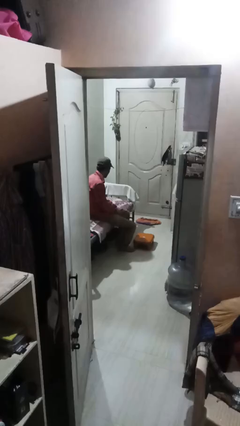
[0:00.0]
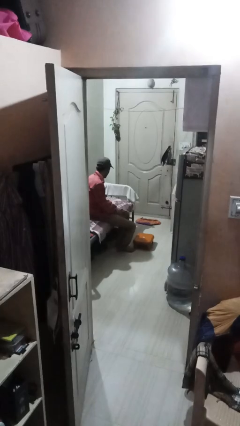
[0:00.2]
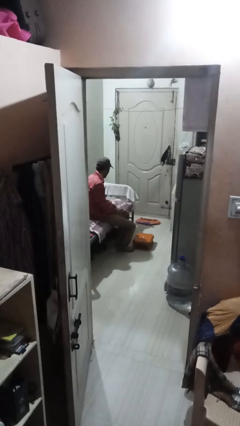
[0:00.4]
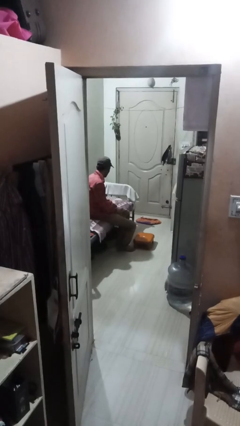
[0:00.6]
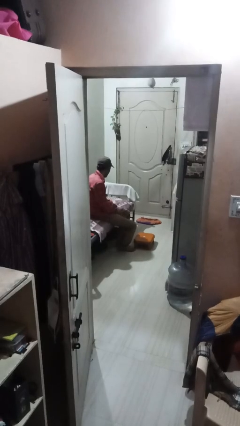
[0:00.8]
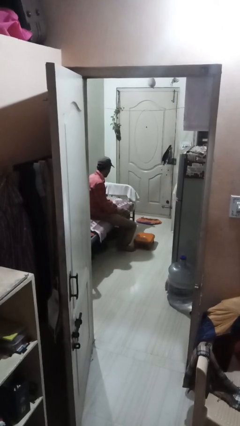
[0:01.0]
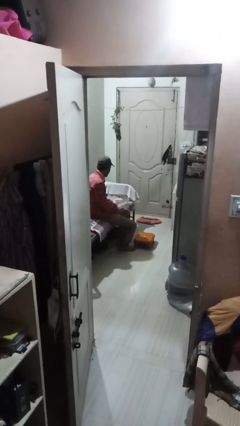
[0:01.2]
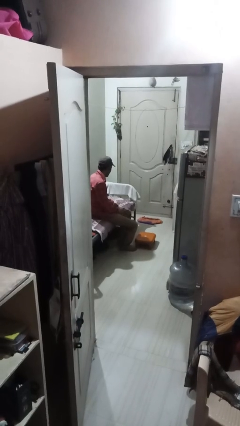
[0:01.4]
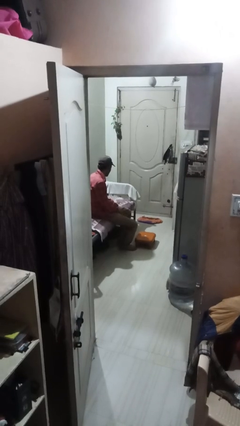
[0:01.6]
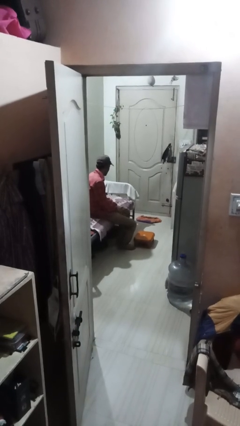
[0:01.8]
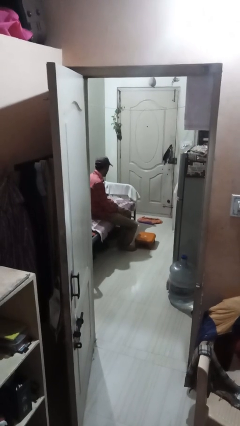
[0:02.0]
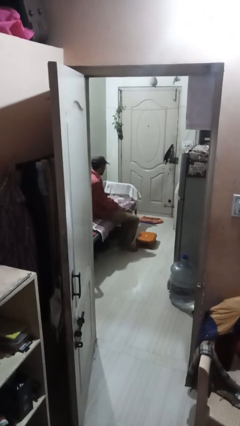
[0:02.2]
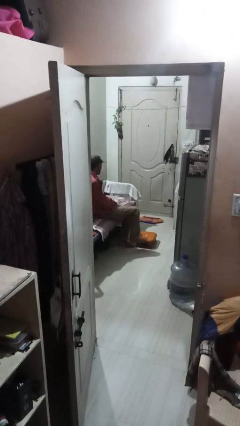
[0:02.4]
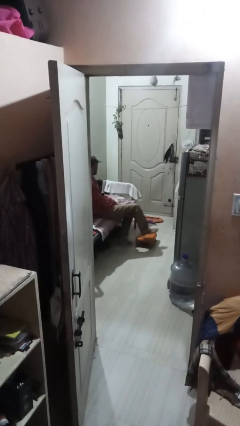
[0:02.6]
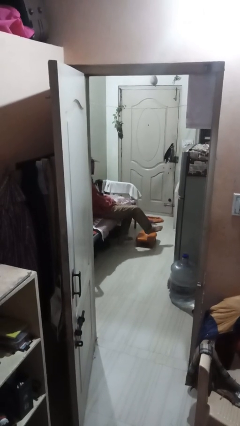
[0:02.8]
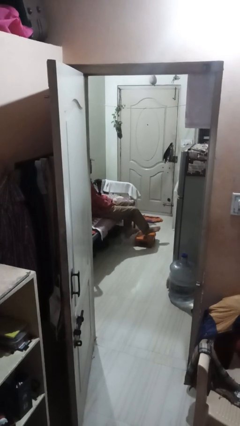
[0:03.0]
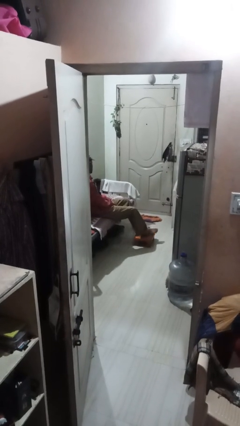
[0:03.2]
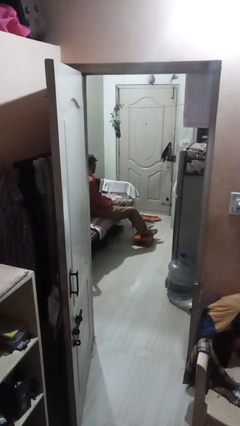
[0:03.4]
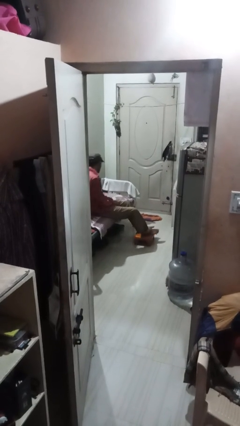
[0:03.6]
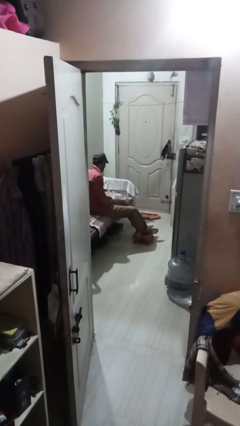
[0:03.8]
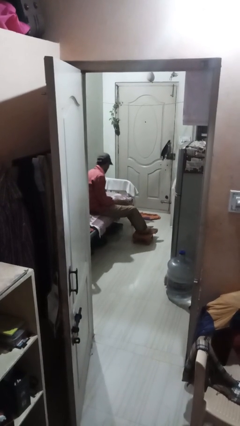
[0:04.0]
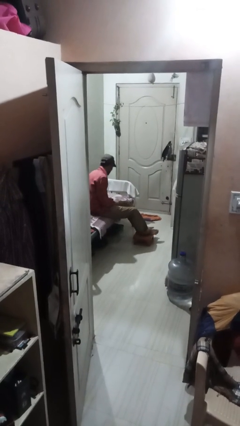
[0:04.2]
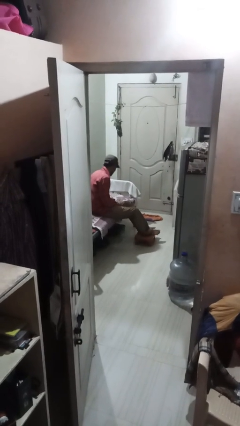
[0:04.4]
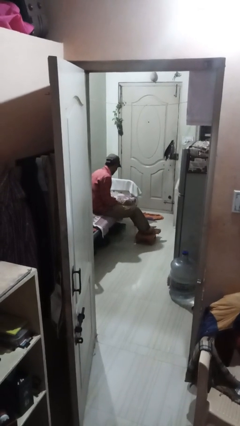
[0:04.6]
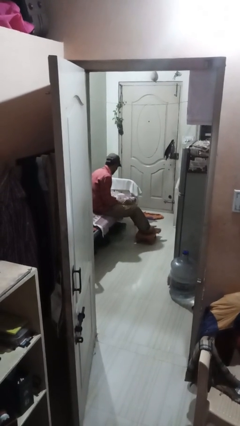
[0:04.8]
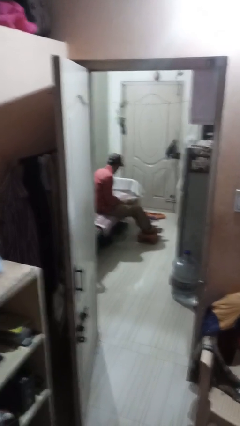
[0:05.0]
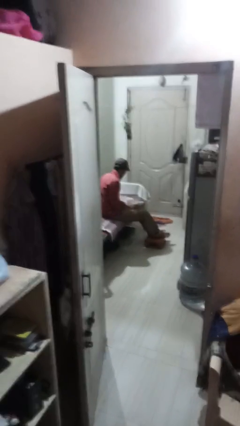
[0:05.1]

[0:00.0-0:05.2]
person puts feet up

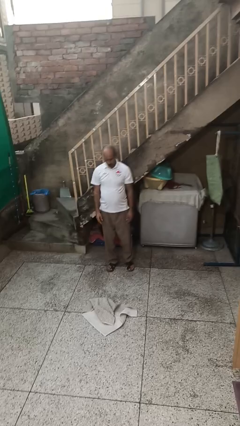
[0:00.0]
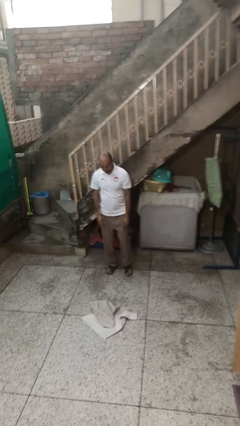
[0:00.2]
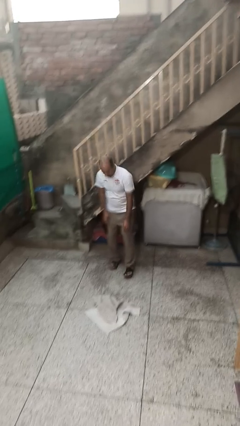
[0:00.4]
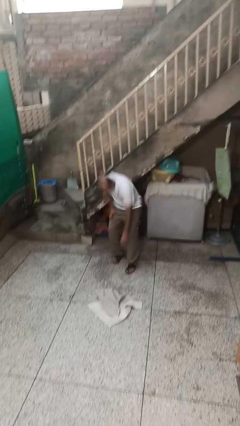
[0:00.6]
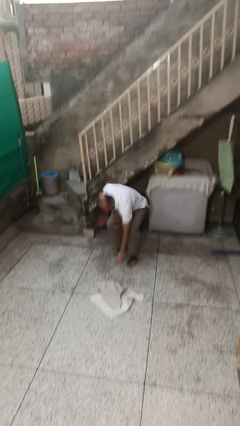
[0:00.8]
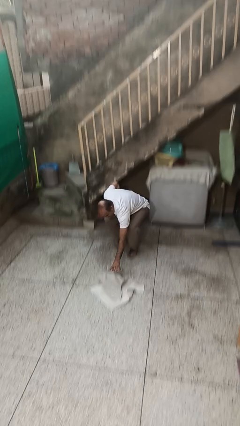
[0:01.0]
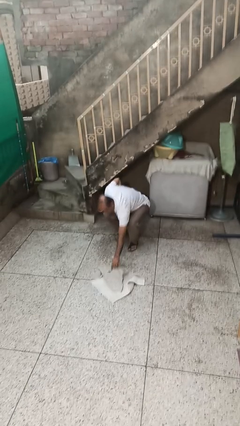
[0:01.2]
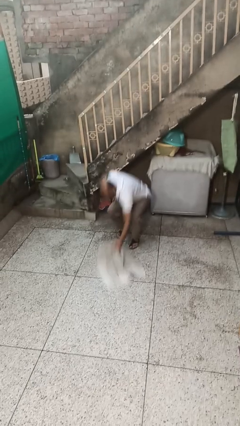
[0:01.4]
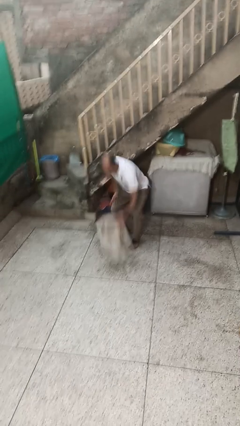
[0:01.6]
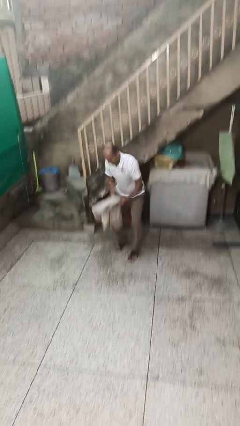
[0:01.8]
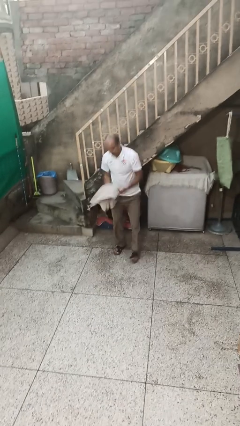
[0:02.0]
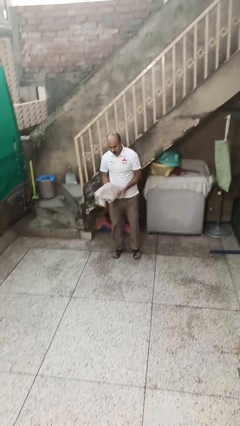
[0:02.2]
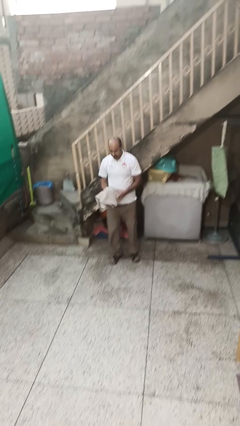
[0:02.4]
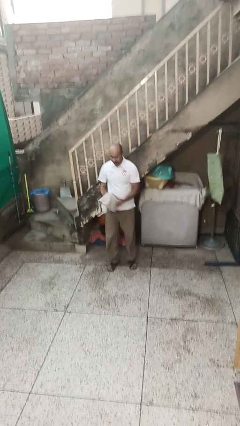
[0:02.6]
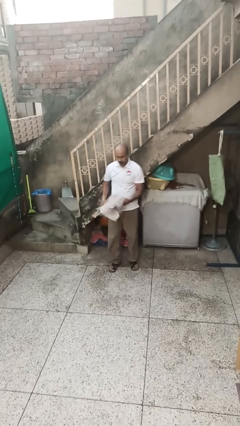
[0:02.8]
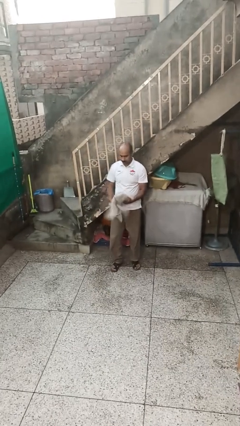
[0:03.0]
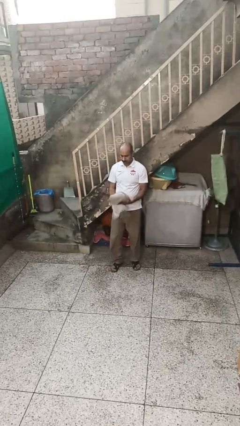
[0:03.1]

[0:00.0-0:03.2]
person picks up object from floor

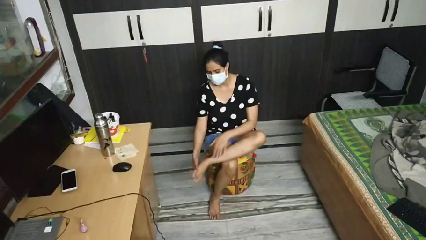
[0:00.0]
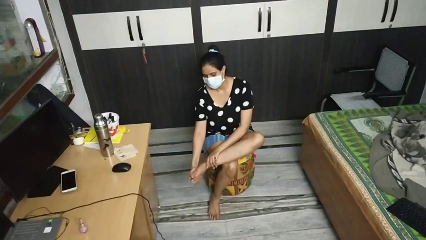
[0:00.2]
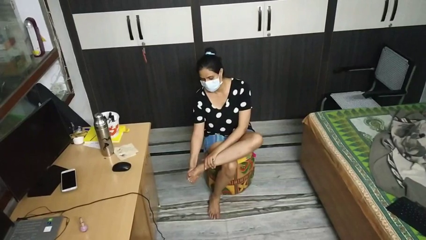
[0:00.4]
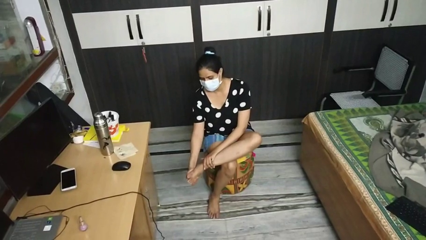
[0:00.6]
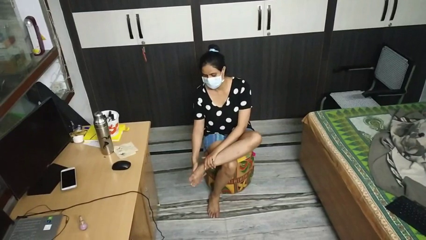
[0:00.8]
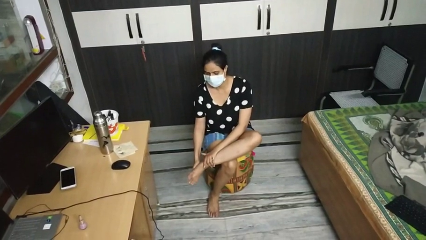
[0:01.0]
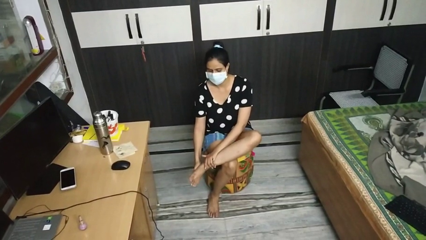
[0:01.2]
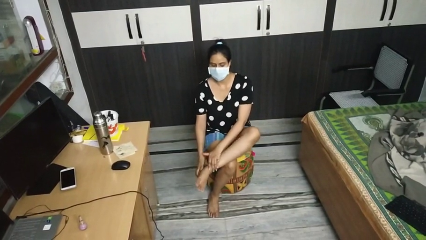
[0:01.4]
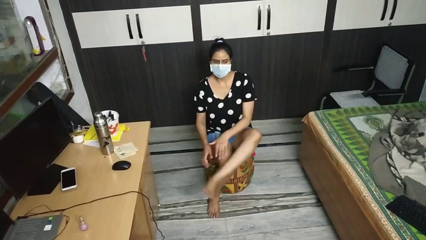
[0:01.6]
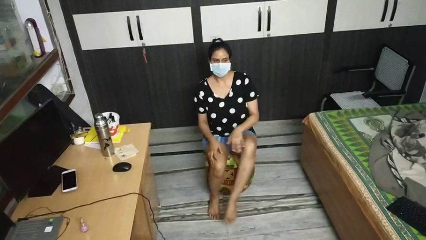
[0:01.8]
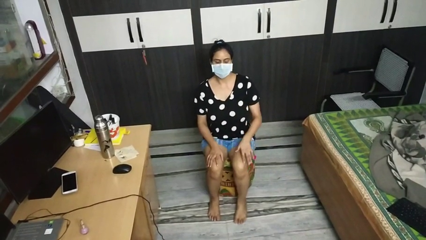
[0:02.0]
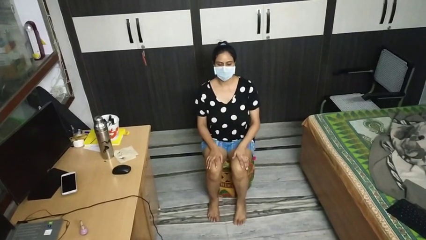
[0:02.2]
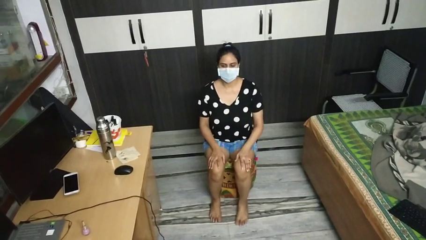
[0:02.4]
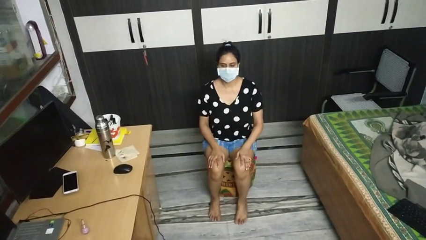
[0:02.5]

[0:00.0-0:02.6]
person rubs foot

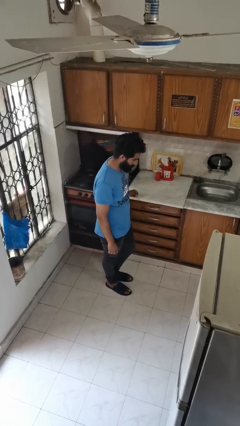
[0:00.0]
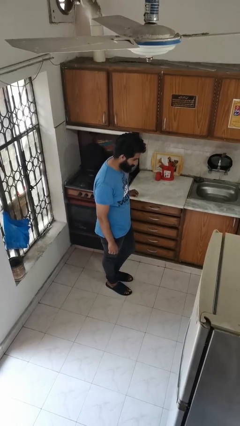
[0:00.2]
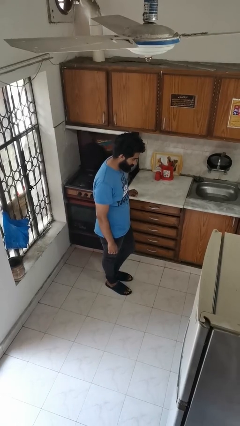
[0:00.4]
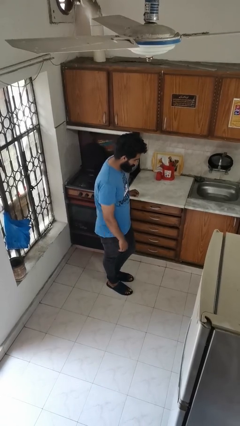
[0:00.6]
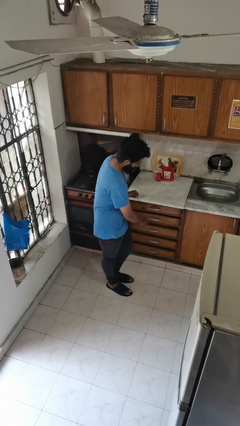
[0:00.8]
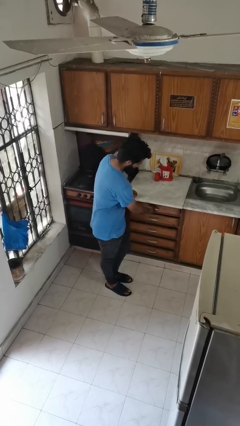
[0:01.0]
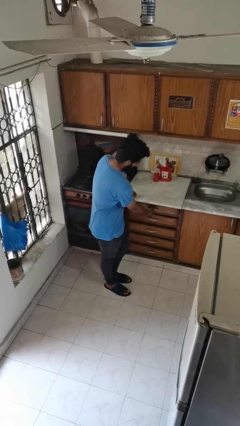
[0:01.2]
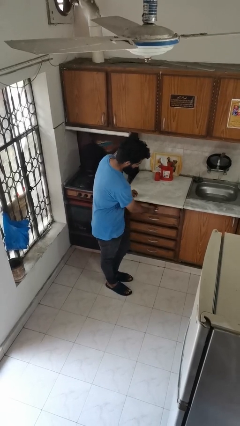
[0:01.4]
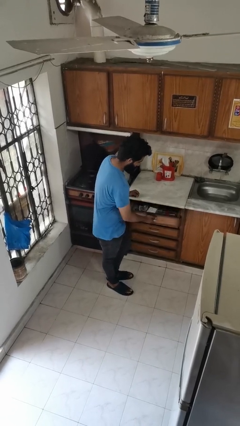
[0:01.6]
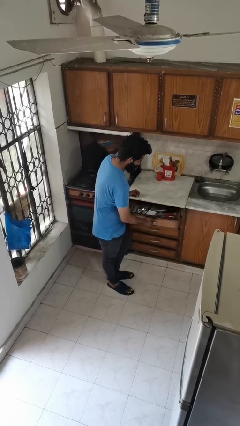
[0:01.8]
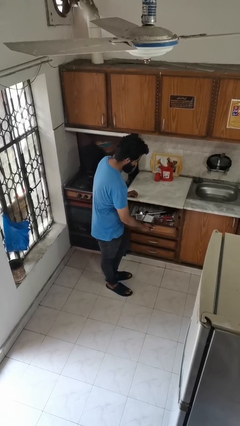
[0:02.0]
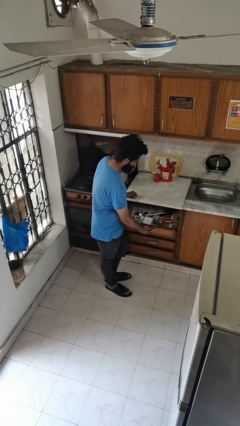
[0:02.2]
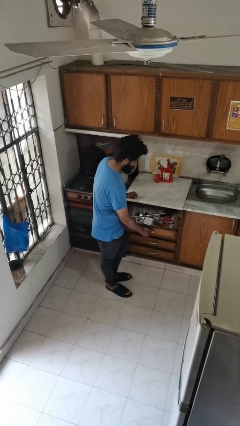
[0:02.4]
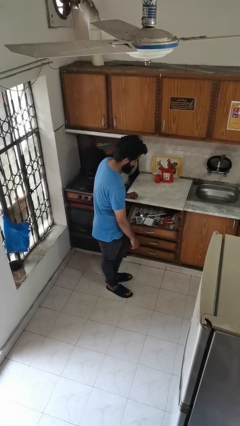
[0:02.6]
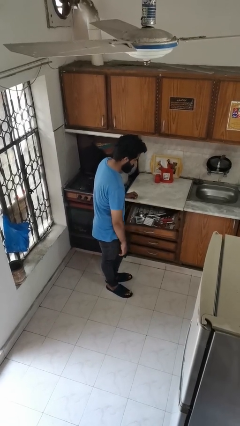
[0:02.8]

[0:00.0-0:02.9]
person opens kitchen drawer

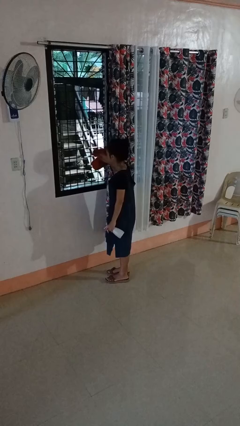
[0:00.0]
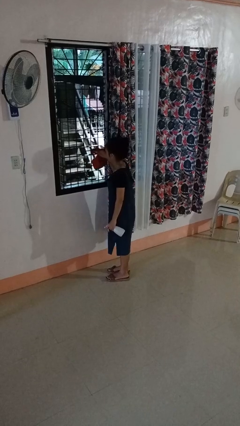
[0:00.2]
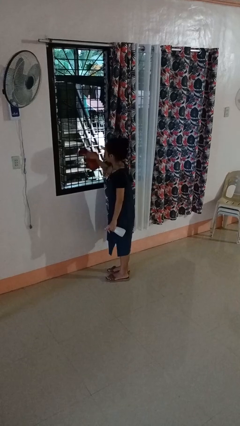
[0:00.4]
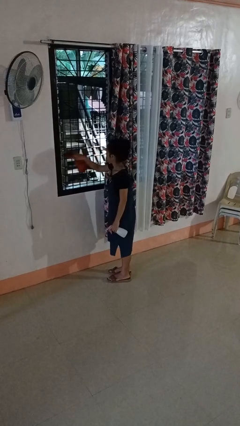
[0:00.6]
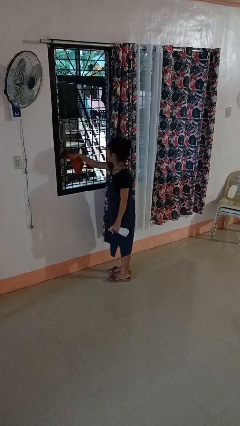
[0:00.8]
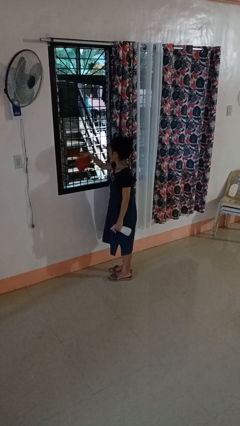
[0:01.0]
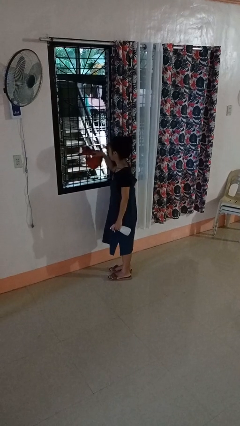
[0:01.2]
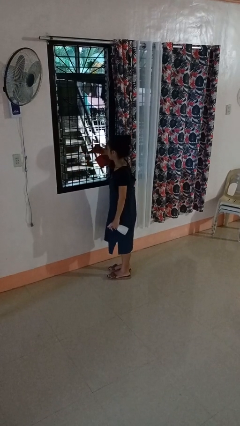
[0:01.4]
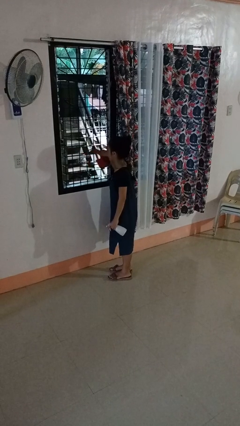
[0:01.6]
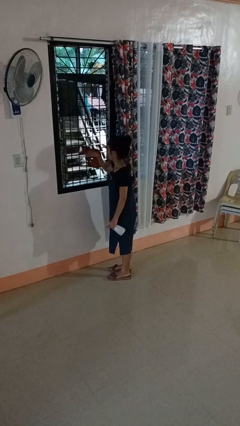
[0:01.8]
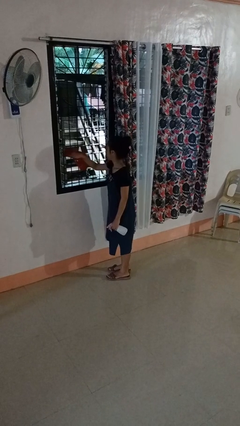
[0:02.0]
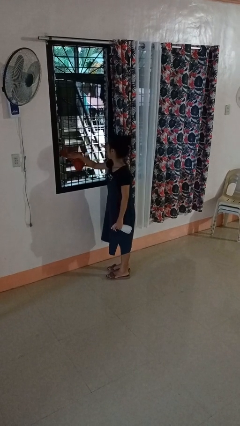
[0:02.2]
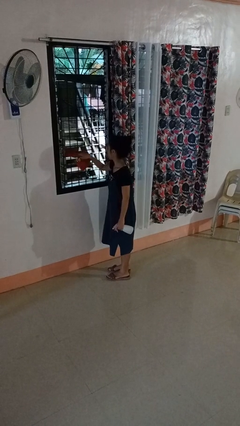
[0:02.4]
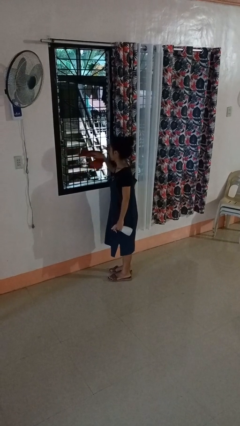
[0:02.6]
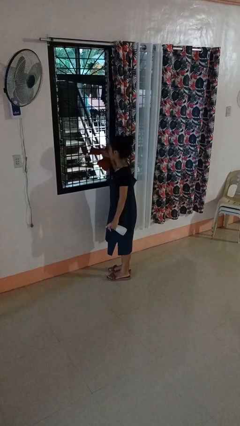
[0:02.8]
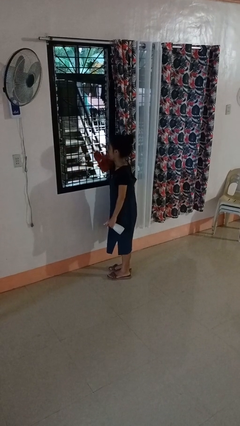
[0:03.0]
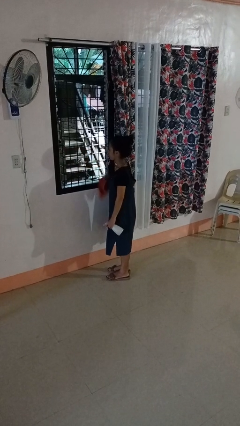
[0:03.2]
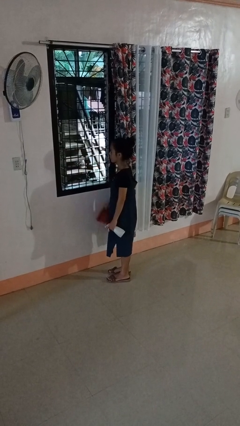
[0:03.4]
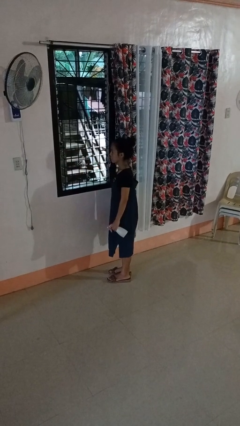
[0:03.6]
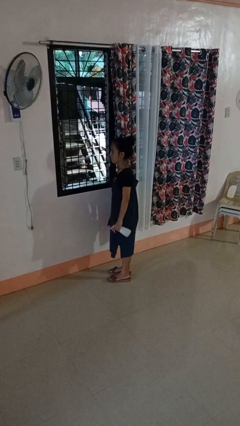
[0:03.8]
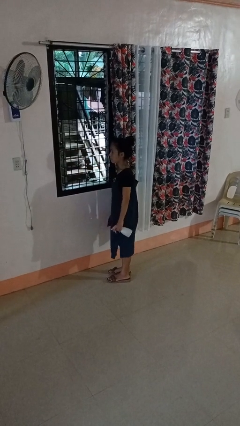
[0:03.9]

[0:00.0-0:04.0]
person washes window
